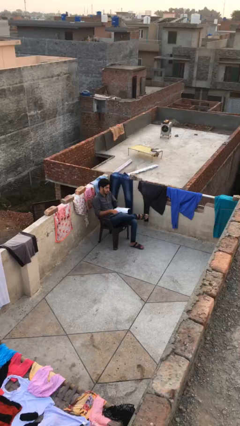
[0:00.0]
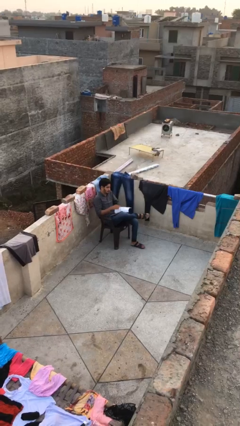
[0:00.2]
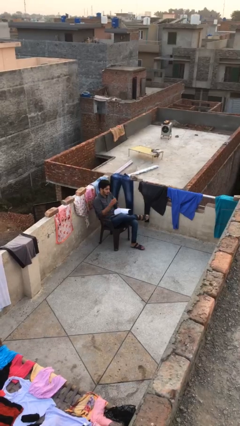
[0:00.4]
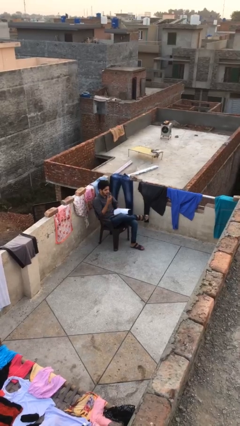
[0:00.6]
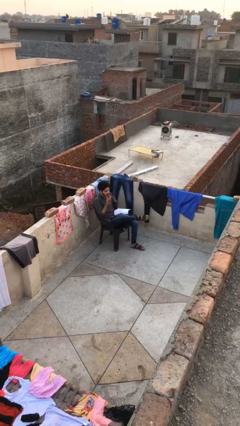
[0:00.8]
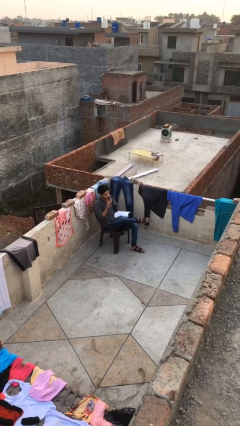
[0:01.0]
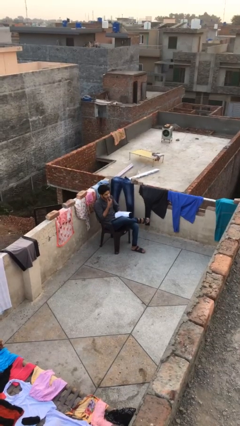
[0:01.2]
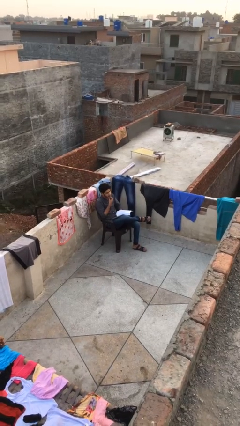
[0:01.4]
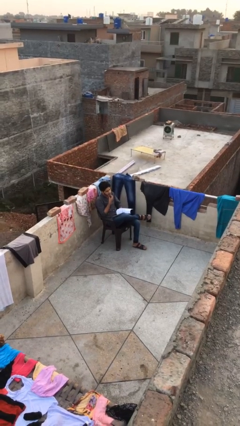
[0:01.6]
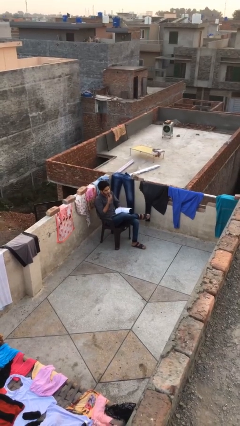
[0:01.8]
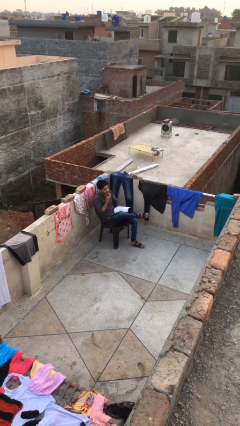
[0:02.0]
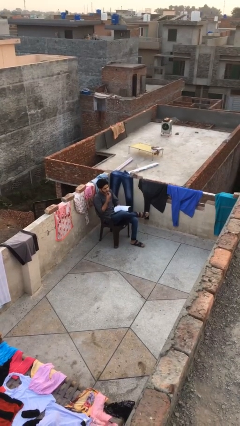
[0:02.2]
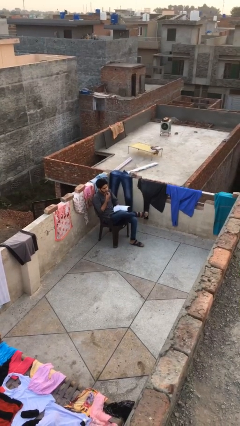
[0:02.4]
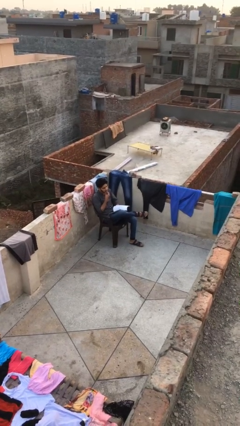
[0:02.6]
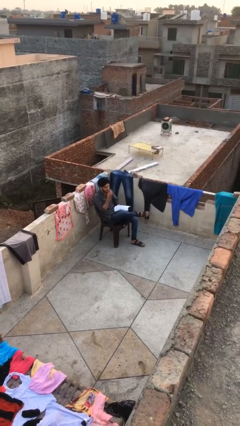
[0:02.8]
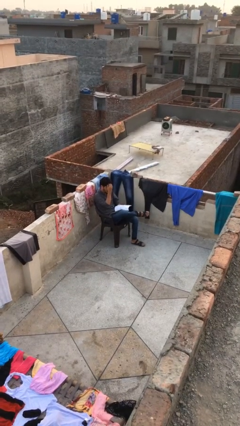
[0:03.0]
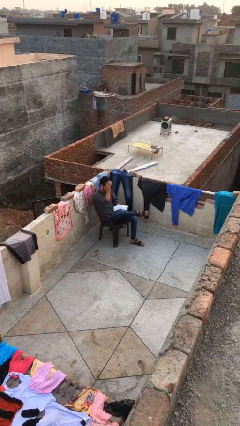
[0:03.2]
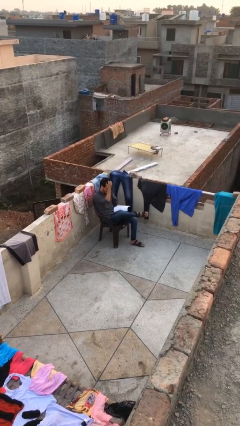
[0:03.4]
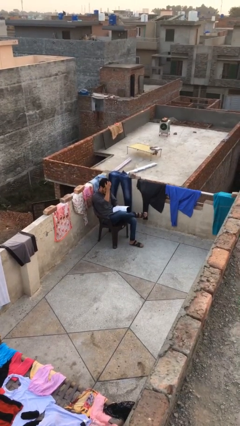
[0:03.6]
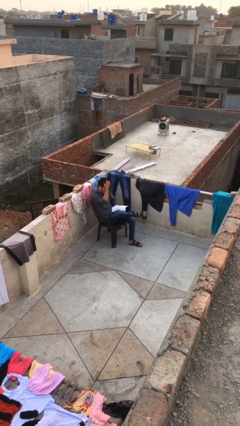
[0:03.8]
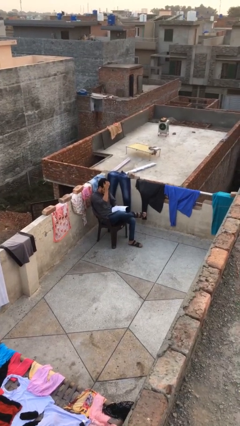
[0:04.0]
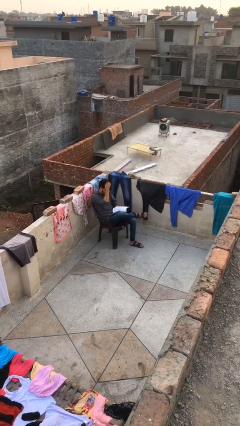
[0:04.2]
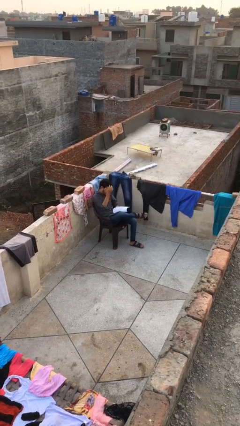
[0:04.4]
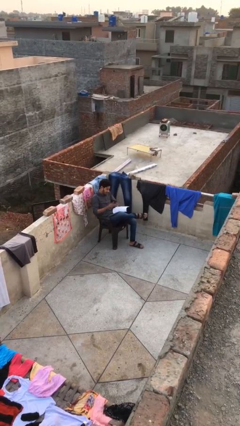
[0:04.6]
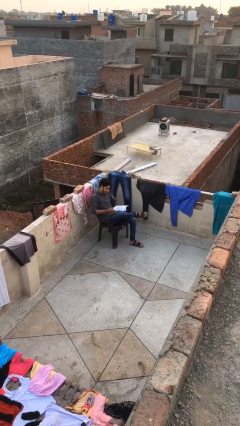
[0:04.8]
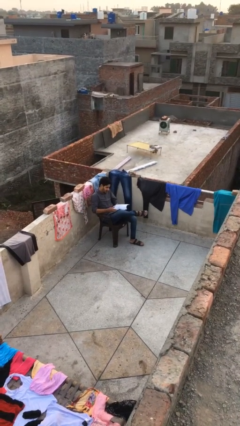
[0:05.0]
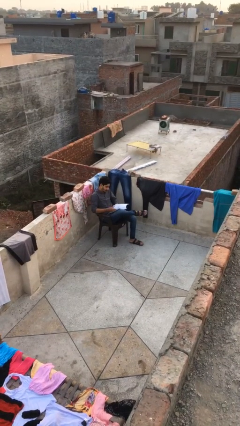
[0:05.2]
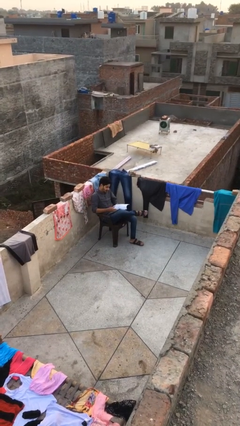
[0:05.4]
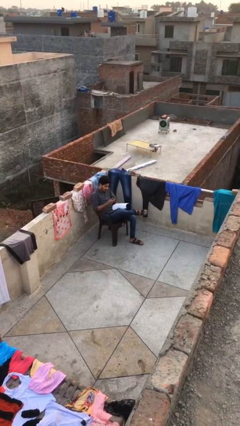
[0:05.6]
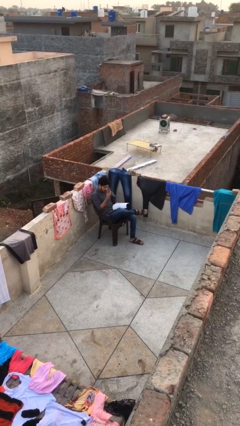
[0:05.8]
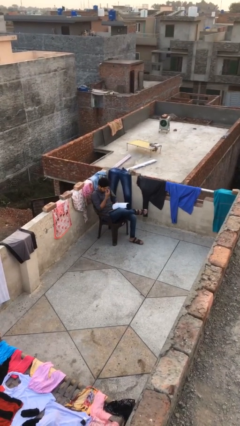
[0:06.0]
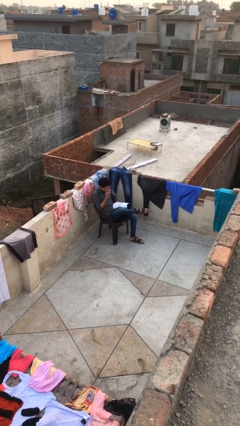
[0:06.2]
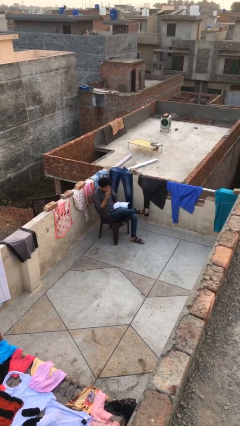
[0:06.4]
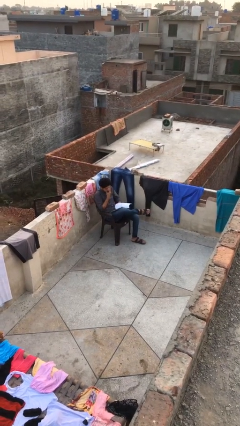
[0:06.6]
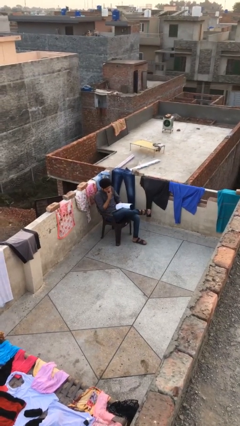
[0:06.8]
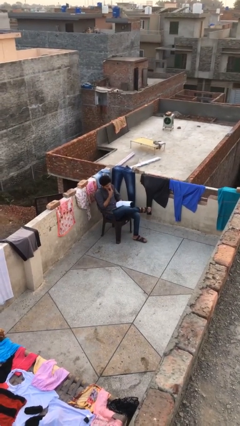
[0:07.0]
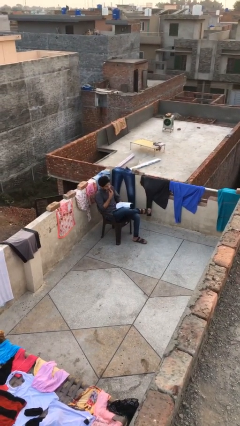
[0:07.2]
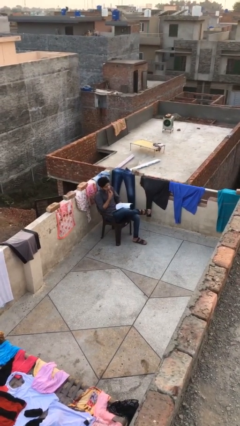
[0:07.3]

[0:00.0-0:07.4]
person reads document

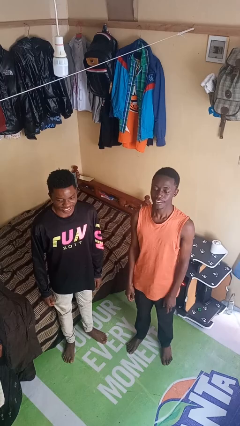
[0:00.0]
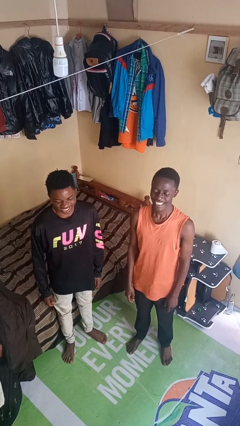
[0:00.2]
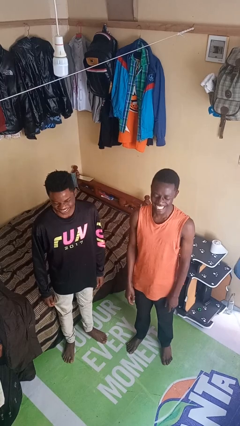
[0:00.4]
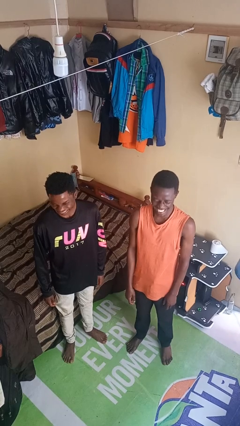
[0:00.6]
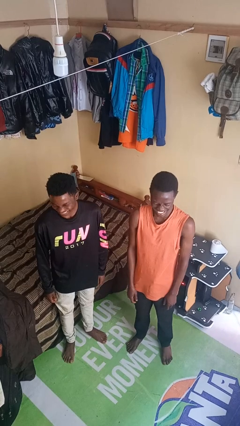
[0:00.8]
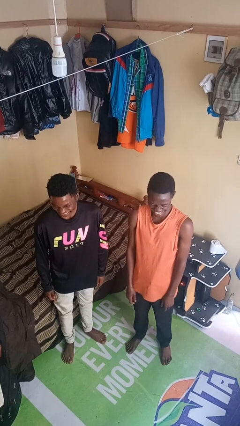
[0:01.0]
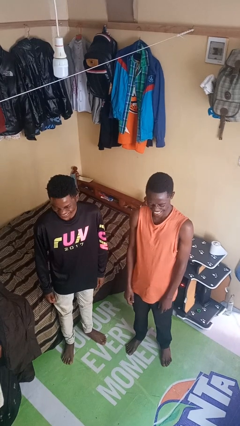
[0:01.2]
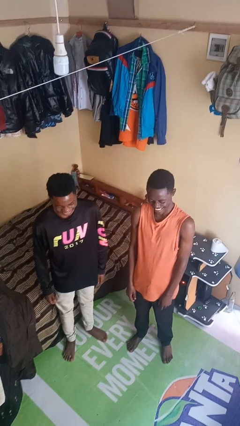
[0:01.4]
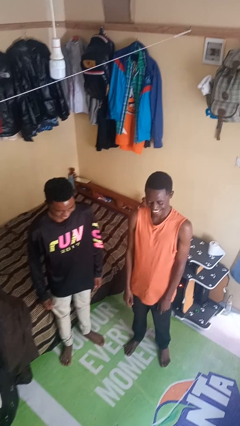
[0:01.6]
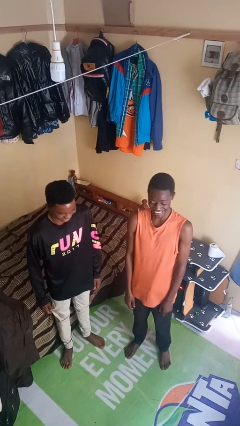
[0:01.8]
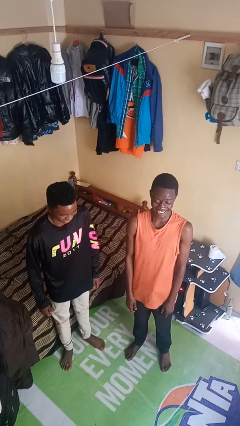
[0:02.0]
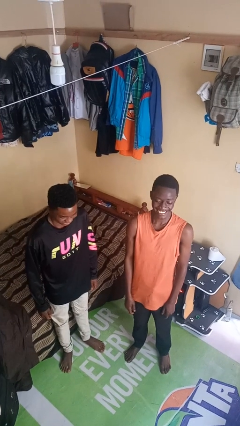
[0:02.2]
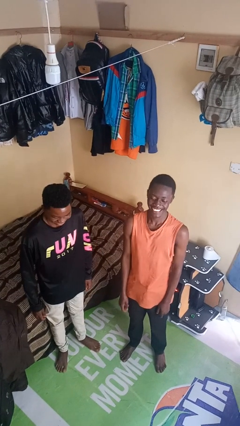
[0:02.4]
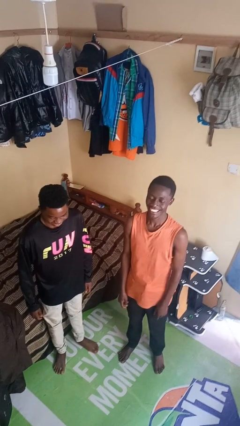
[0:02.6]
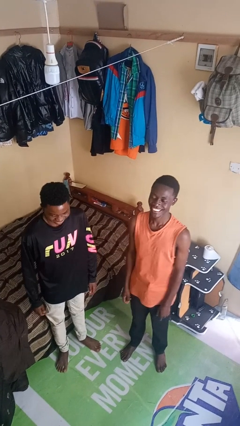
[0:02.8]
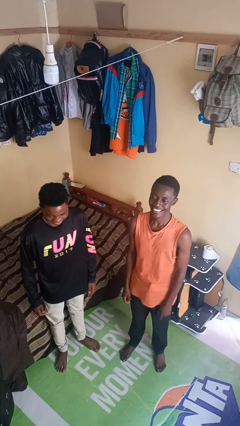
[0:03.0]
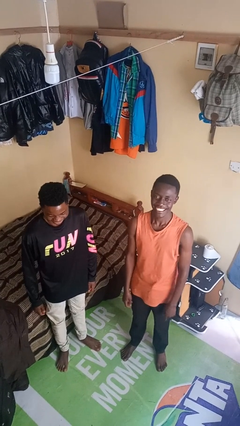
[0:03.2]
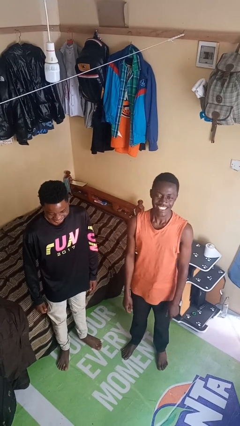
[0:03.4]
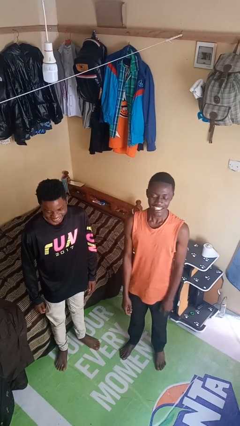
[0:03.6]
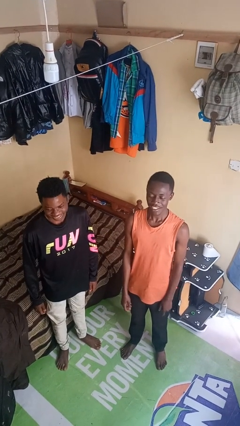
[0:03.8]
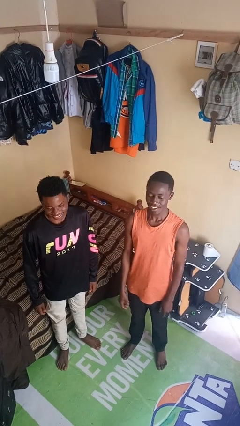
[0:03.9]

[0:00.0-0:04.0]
person laughs with person

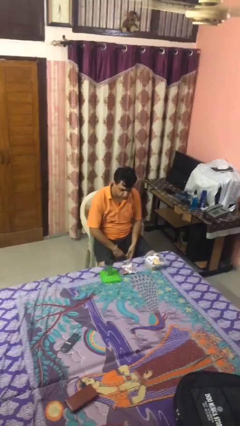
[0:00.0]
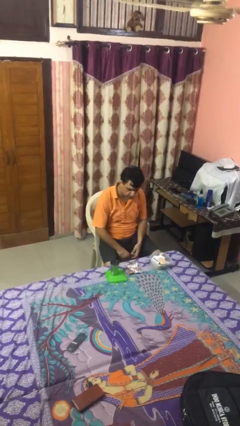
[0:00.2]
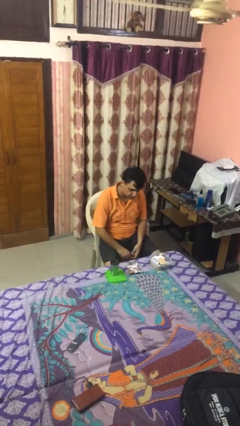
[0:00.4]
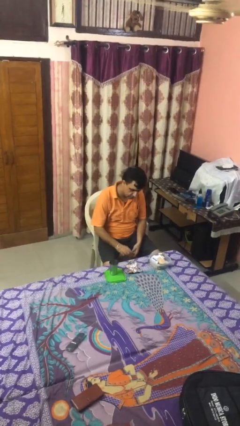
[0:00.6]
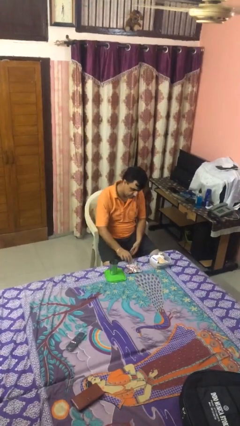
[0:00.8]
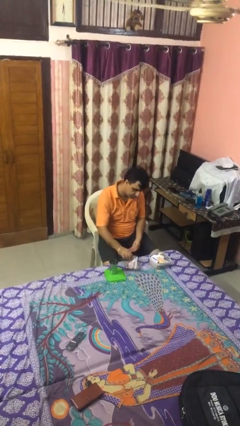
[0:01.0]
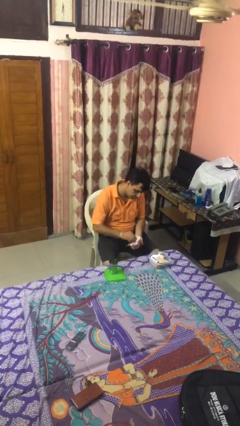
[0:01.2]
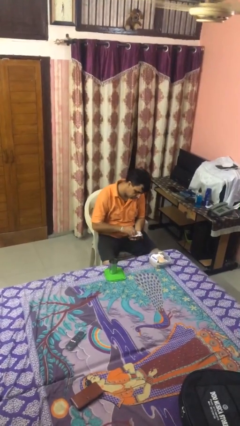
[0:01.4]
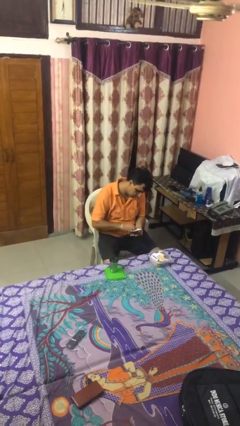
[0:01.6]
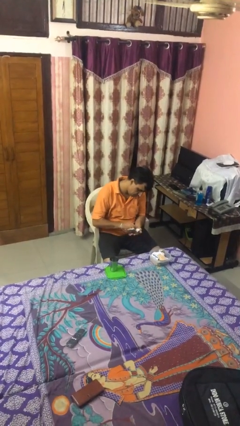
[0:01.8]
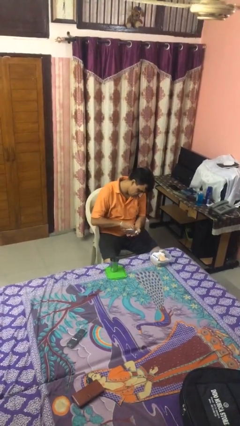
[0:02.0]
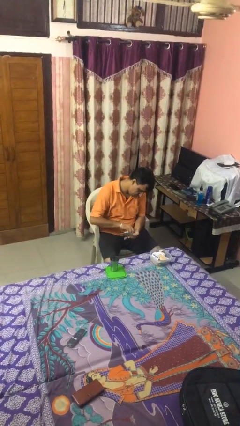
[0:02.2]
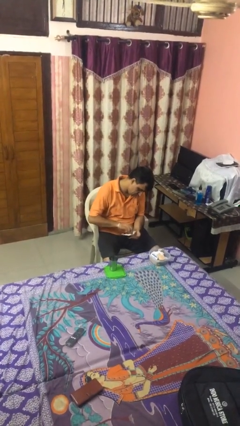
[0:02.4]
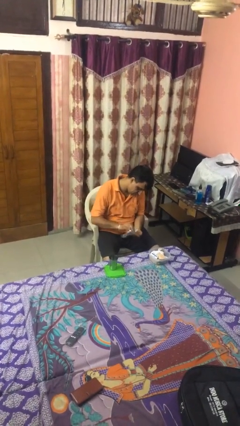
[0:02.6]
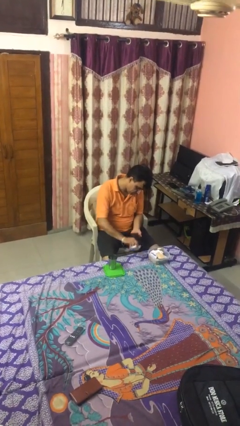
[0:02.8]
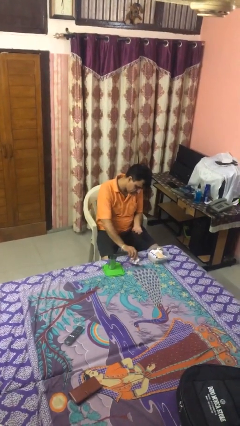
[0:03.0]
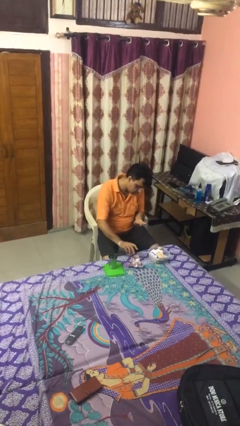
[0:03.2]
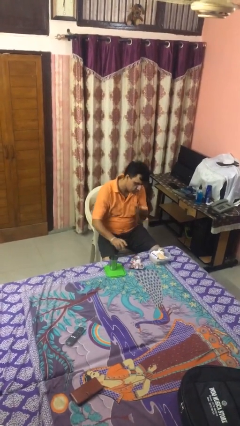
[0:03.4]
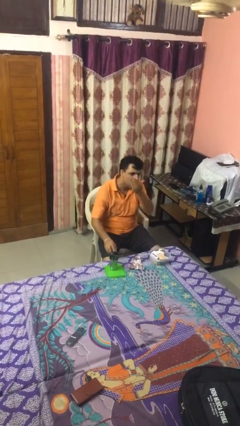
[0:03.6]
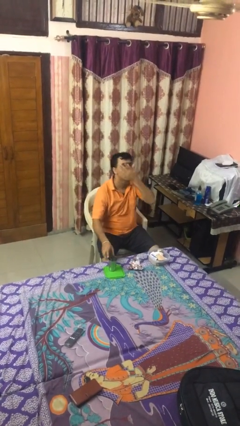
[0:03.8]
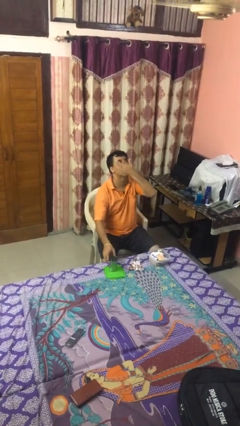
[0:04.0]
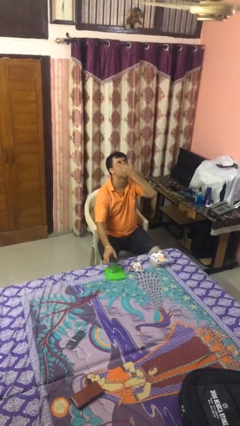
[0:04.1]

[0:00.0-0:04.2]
person takes medicine pills

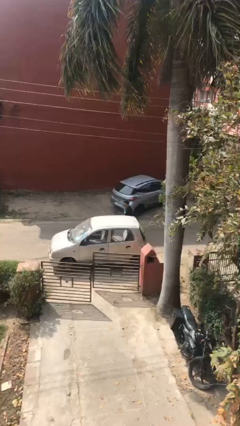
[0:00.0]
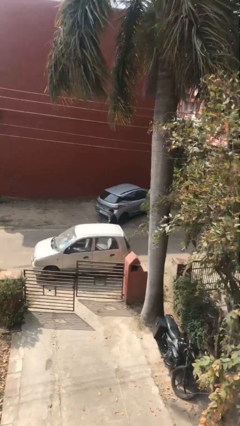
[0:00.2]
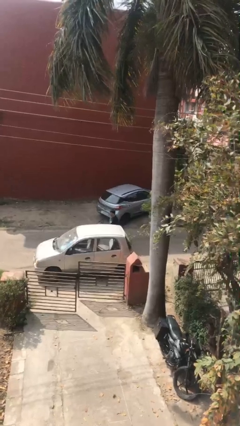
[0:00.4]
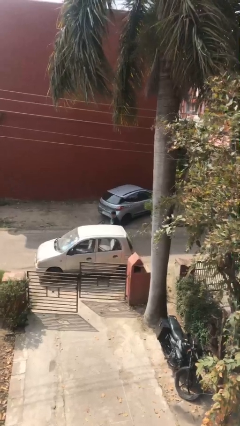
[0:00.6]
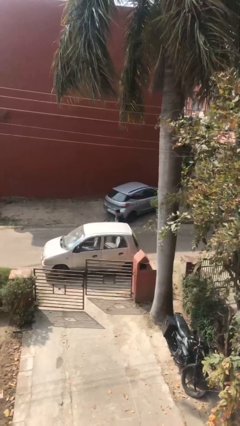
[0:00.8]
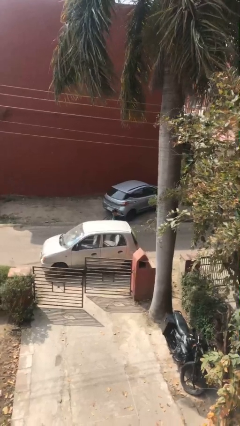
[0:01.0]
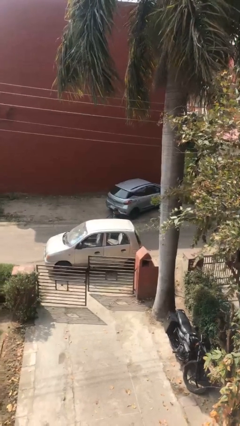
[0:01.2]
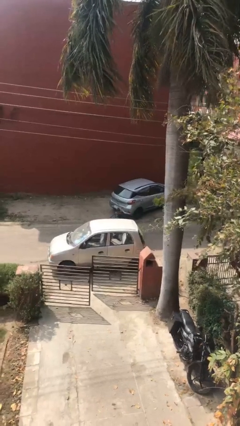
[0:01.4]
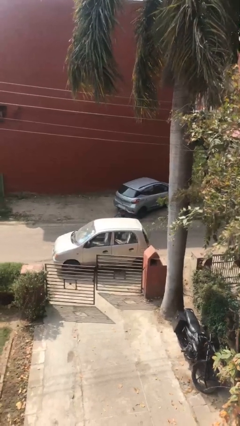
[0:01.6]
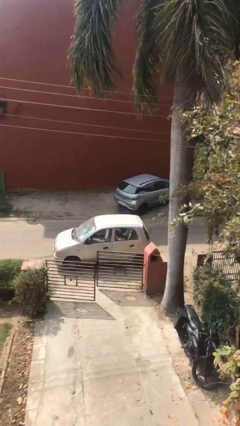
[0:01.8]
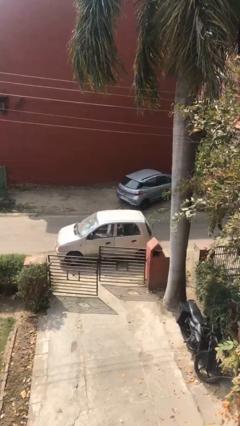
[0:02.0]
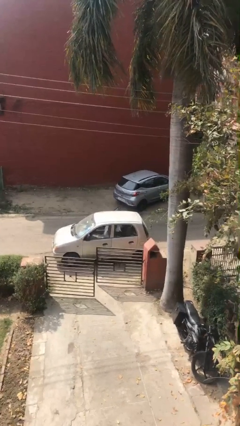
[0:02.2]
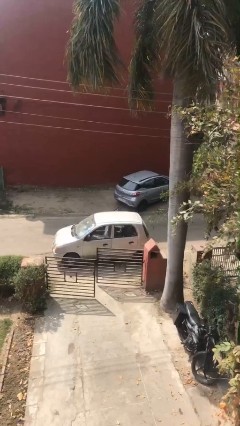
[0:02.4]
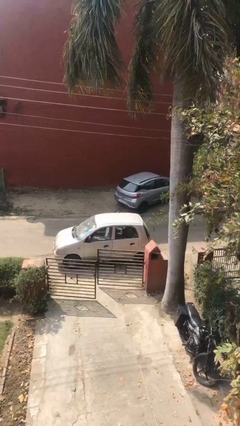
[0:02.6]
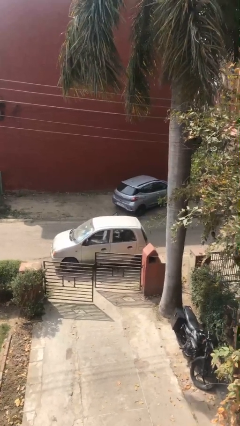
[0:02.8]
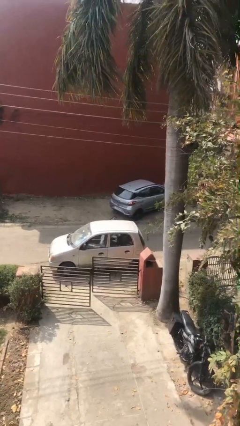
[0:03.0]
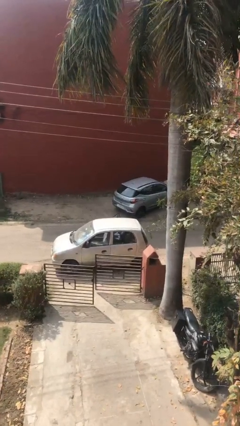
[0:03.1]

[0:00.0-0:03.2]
person enters car
